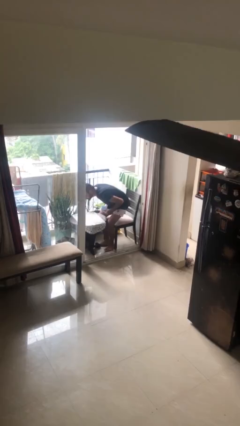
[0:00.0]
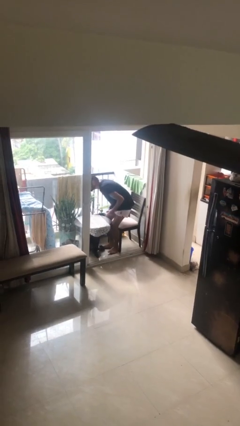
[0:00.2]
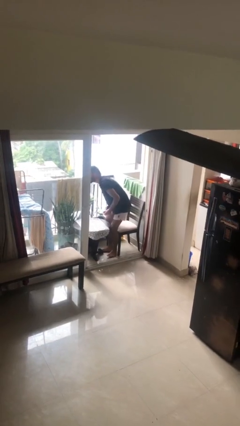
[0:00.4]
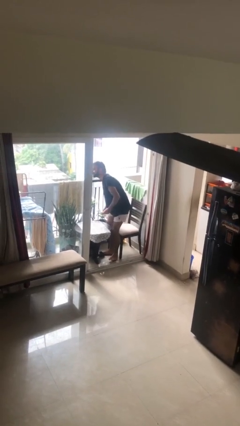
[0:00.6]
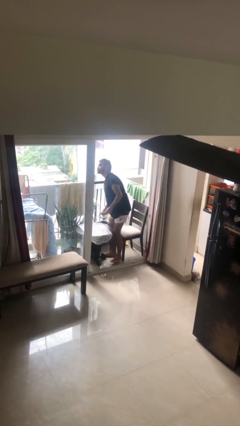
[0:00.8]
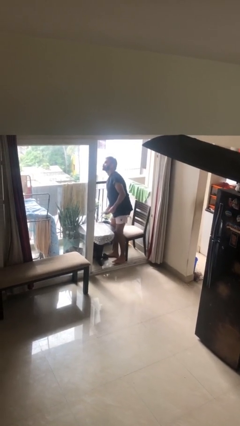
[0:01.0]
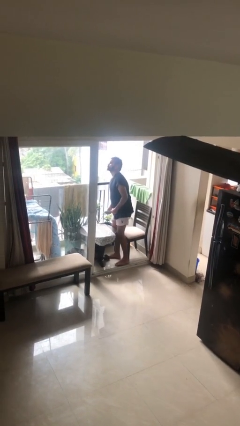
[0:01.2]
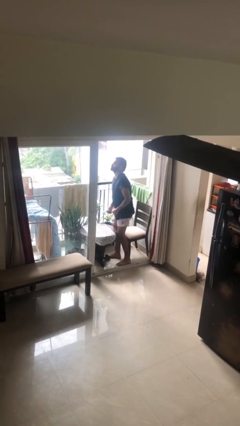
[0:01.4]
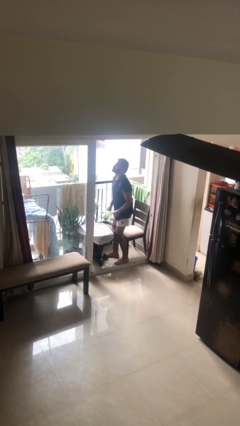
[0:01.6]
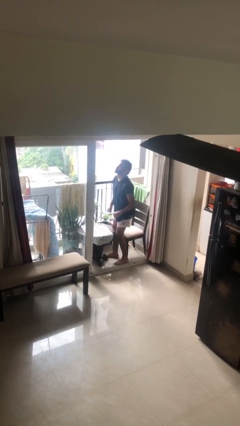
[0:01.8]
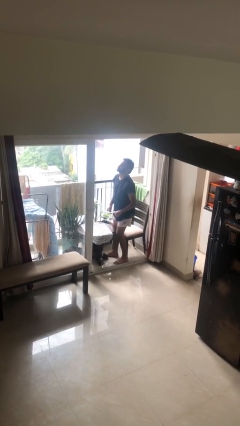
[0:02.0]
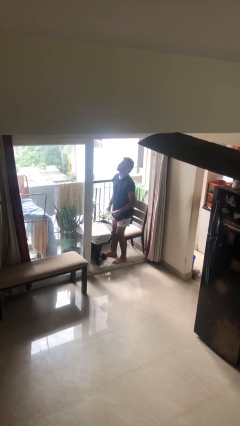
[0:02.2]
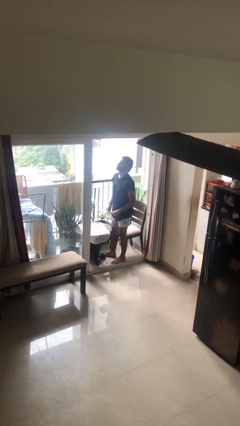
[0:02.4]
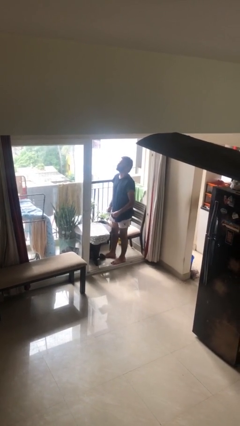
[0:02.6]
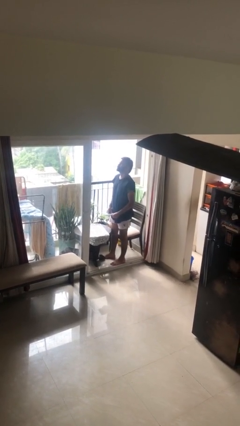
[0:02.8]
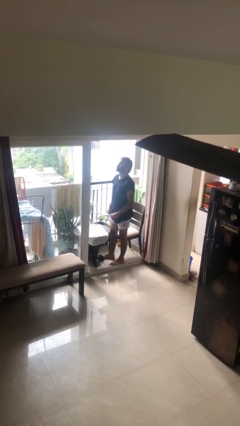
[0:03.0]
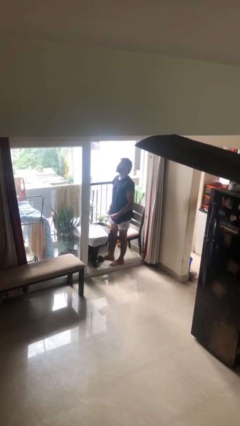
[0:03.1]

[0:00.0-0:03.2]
person stands up

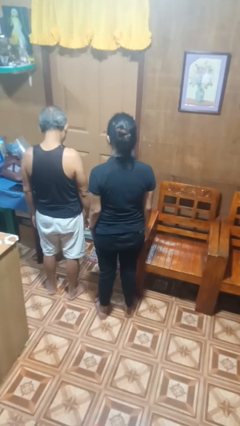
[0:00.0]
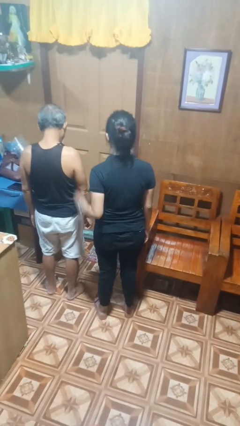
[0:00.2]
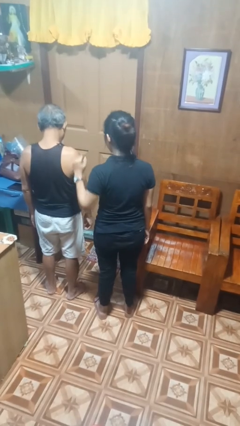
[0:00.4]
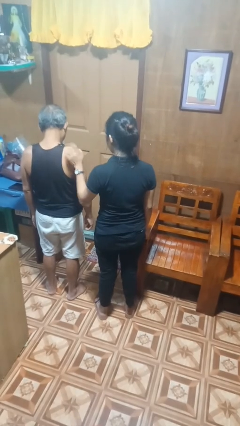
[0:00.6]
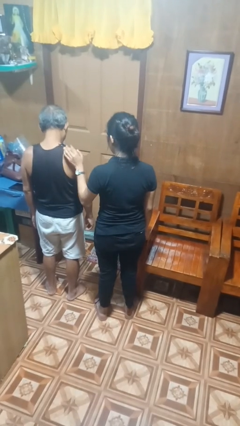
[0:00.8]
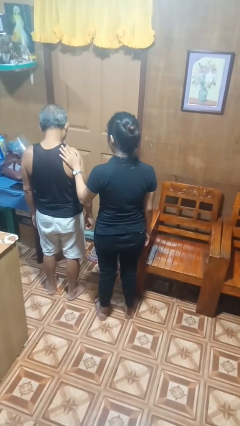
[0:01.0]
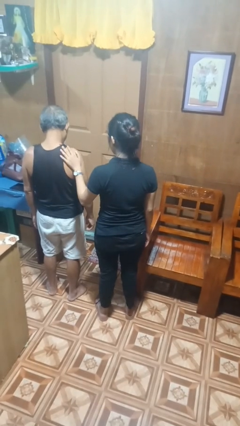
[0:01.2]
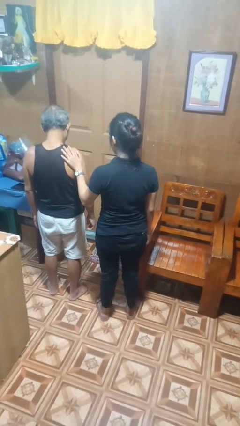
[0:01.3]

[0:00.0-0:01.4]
person pounds shoulders of person

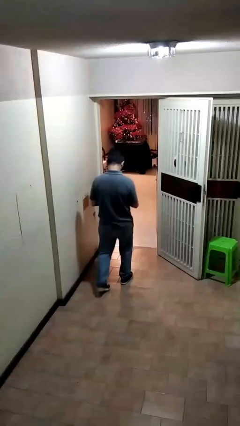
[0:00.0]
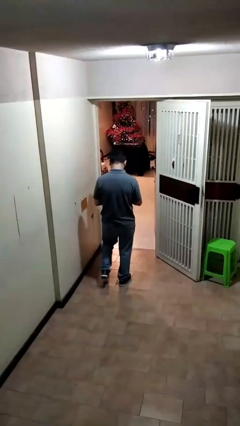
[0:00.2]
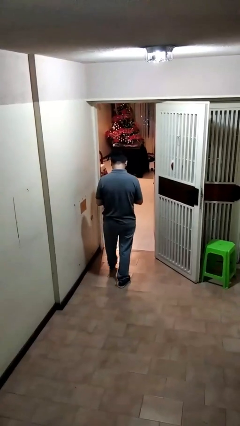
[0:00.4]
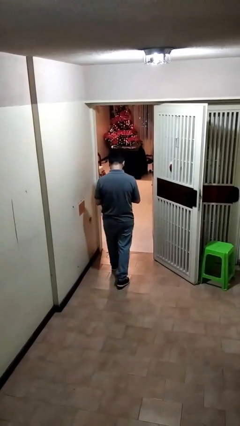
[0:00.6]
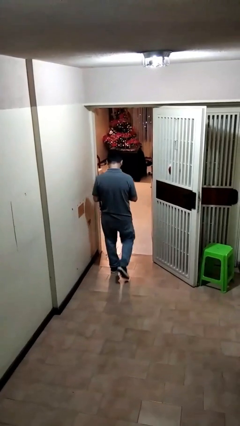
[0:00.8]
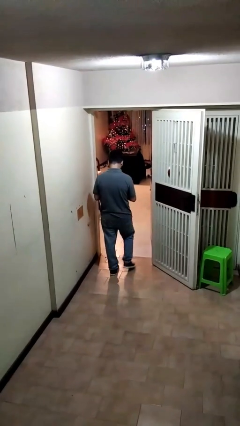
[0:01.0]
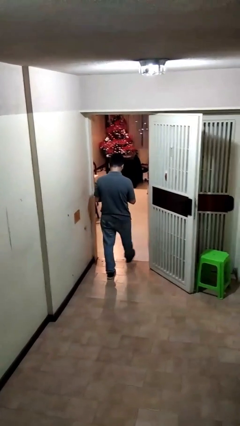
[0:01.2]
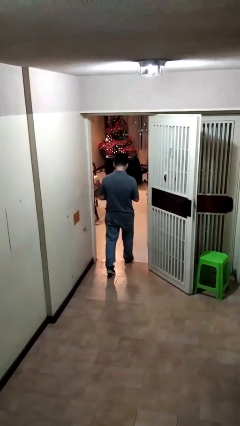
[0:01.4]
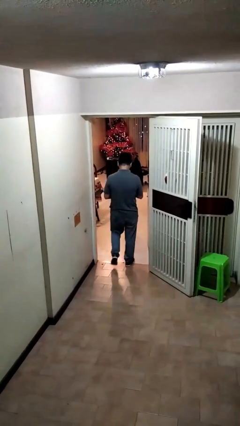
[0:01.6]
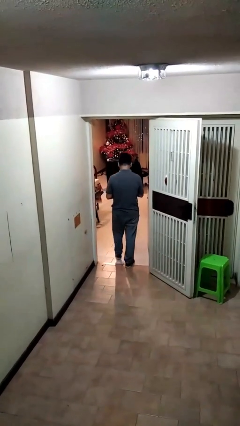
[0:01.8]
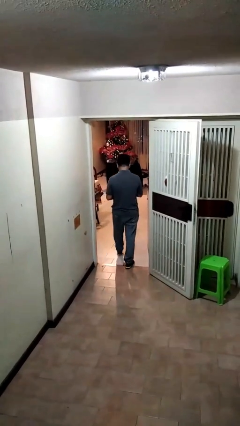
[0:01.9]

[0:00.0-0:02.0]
person exits scene through structure

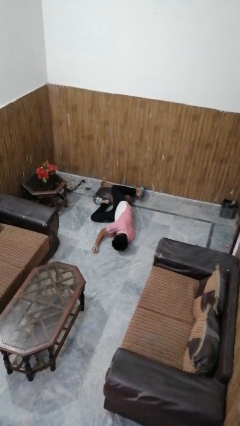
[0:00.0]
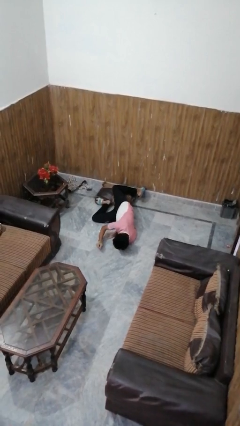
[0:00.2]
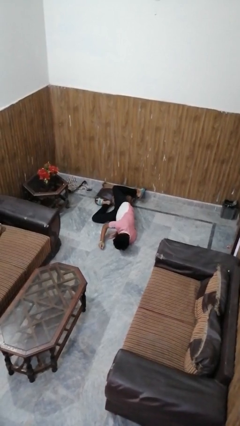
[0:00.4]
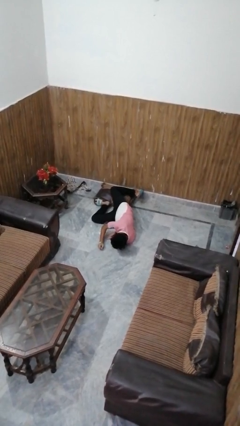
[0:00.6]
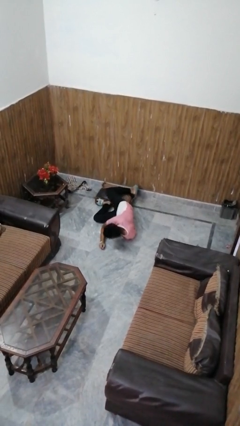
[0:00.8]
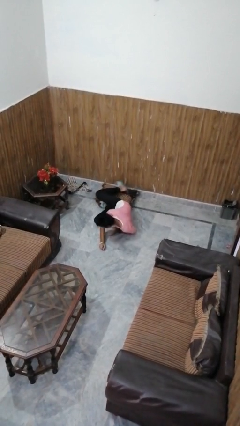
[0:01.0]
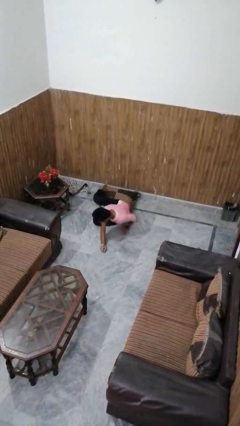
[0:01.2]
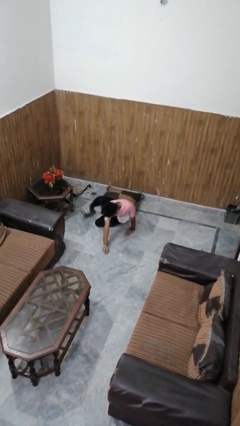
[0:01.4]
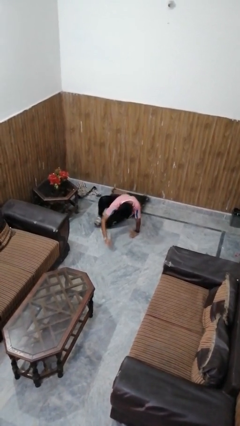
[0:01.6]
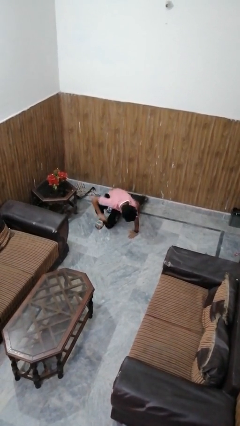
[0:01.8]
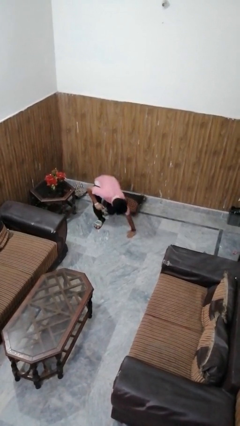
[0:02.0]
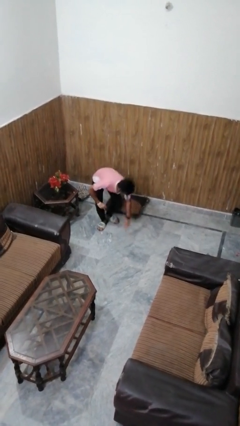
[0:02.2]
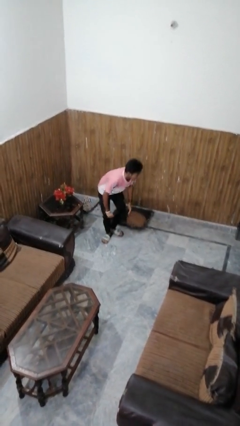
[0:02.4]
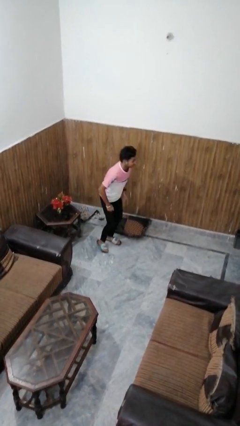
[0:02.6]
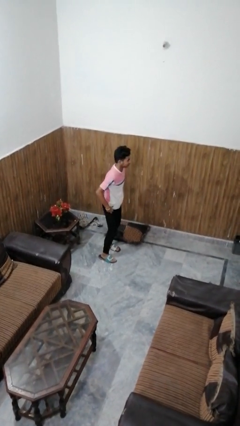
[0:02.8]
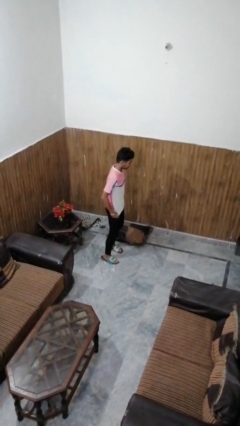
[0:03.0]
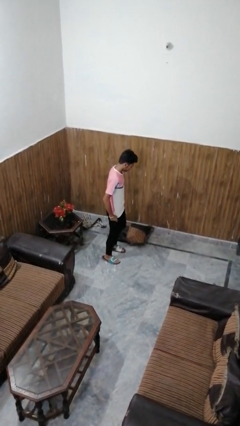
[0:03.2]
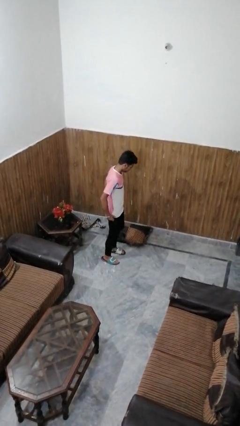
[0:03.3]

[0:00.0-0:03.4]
person stands up from floor

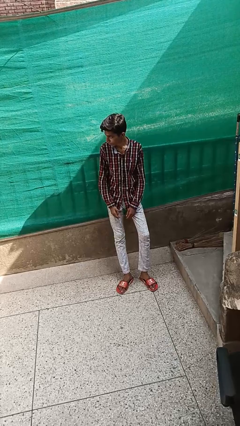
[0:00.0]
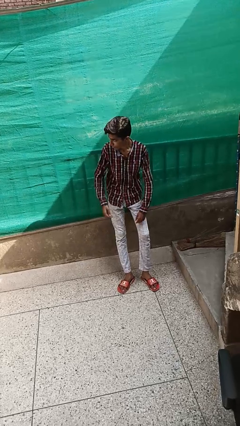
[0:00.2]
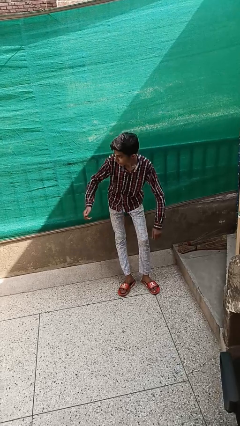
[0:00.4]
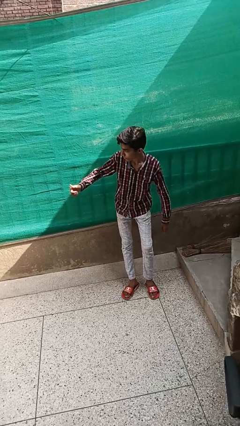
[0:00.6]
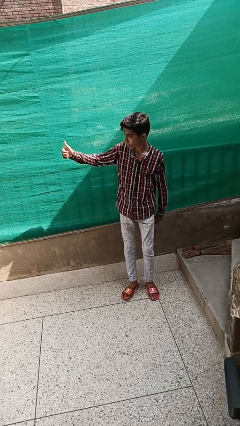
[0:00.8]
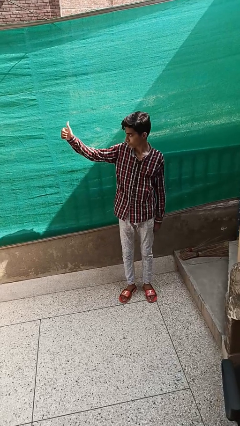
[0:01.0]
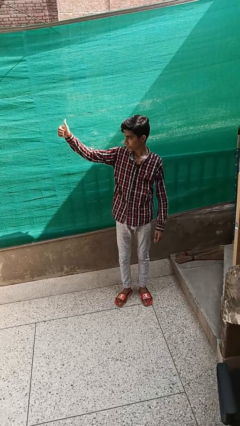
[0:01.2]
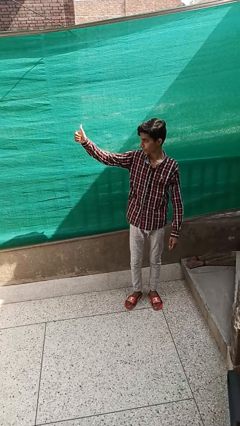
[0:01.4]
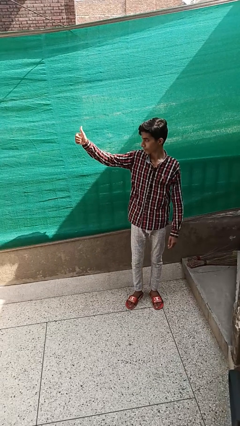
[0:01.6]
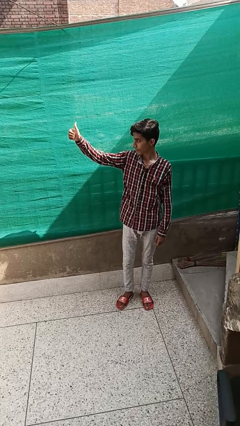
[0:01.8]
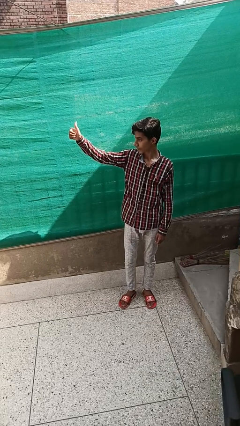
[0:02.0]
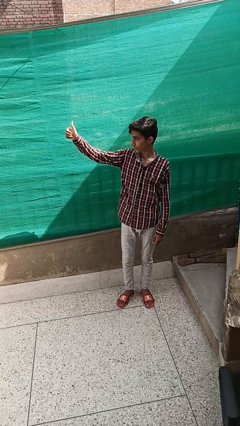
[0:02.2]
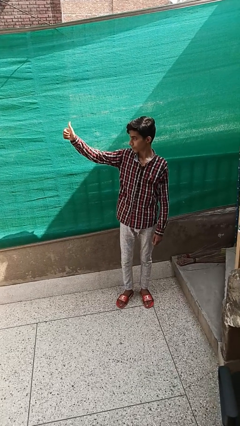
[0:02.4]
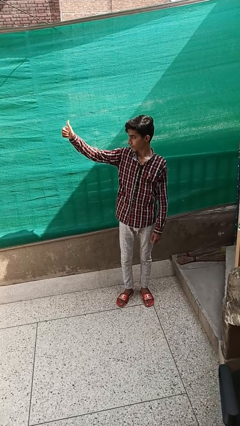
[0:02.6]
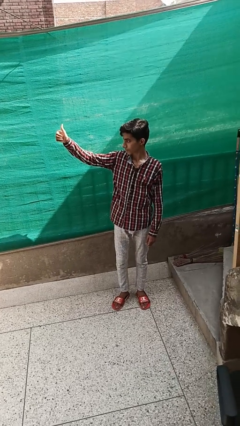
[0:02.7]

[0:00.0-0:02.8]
person gestures thumbs up

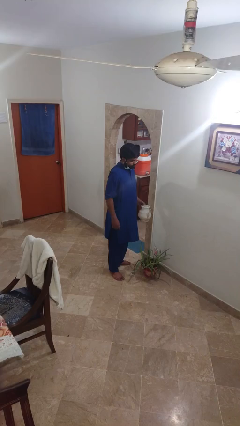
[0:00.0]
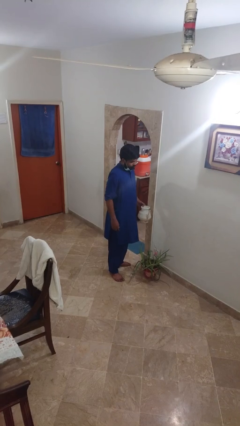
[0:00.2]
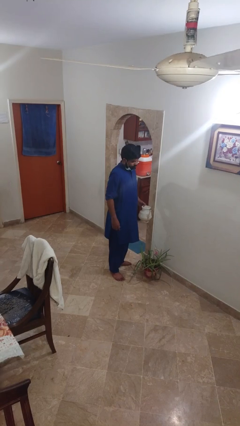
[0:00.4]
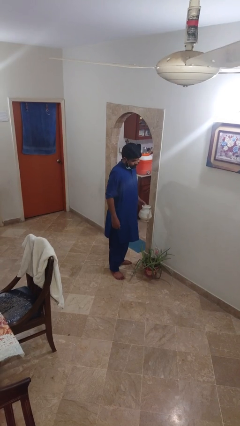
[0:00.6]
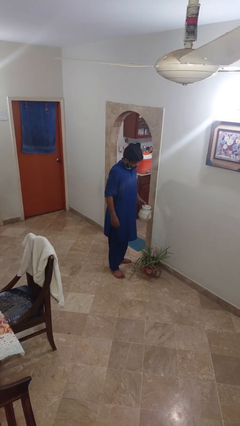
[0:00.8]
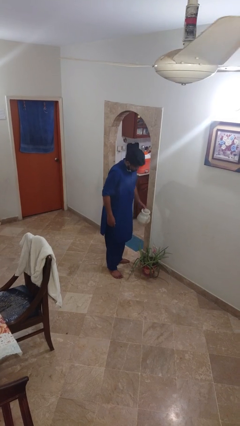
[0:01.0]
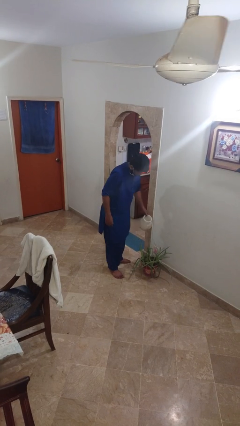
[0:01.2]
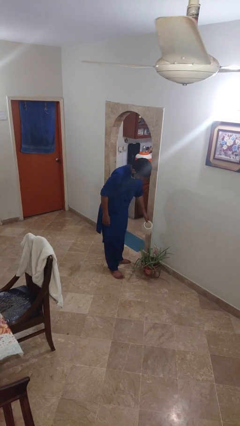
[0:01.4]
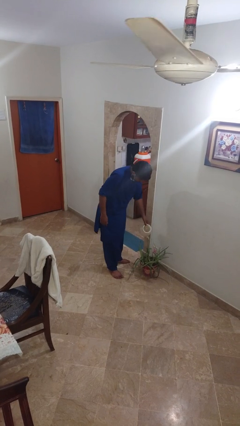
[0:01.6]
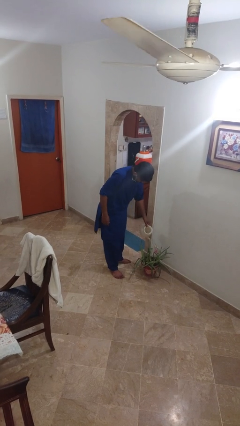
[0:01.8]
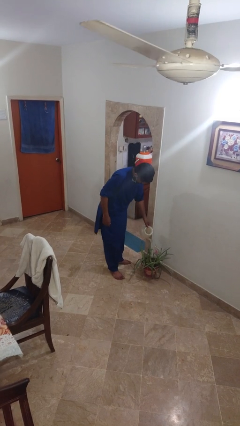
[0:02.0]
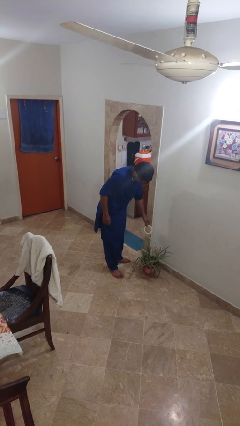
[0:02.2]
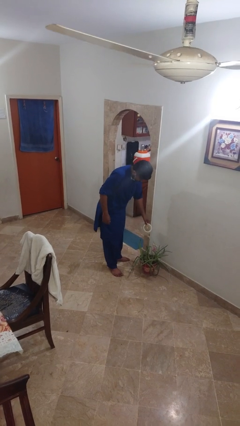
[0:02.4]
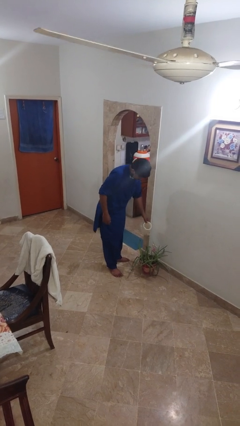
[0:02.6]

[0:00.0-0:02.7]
person waters houseplant

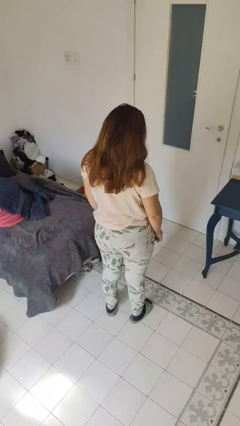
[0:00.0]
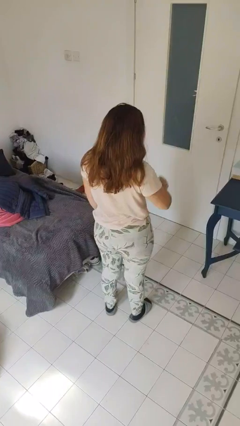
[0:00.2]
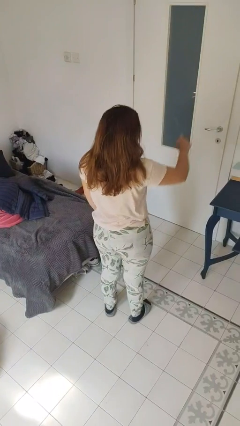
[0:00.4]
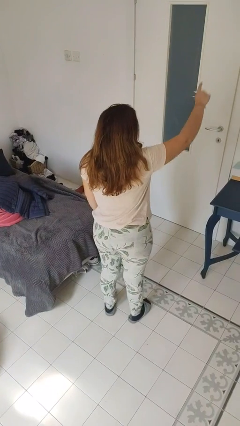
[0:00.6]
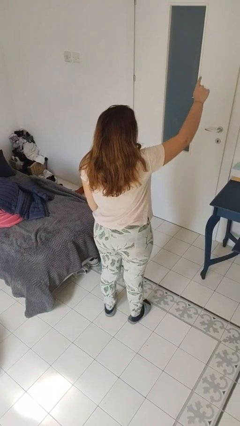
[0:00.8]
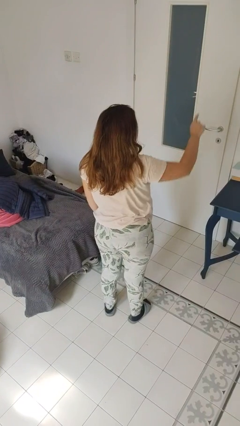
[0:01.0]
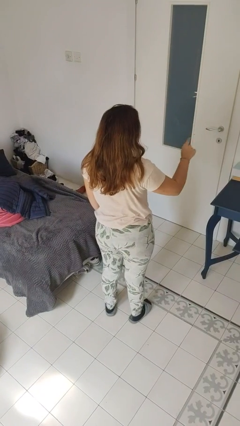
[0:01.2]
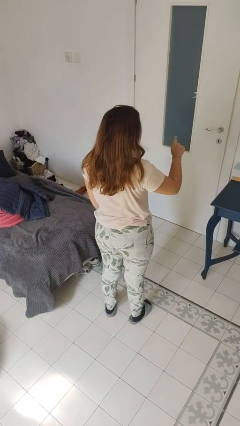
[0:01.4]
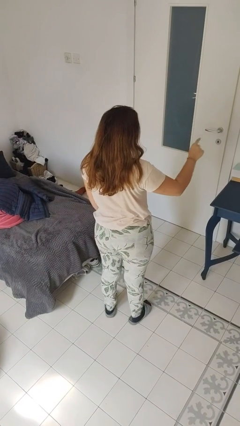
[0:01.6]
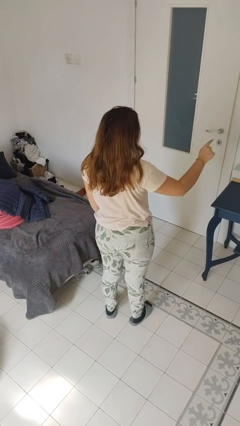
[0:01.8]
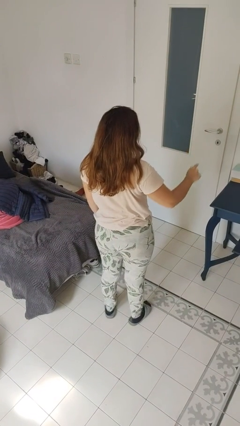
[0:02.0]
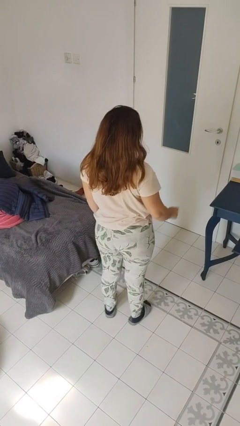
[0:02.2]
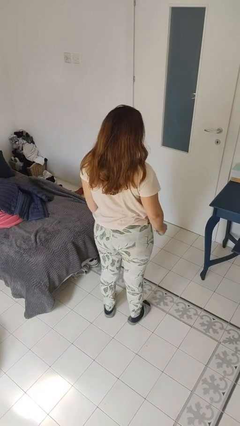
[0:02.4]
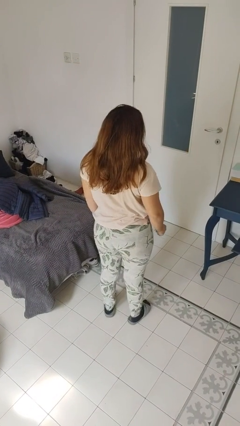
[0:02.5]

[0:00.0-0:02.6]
person gestures number one
